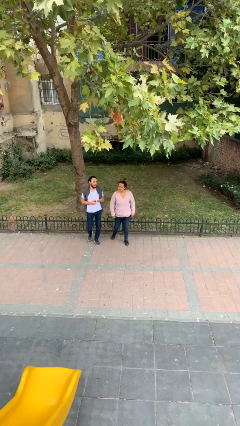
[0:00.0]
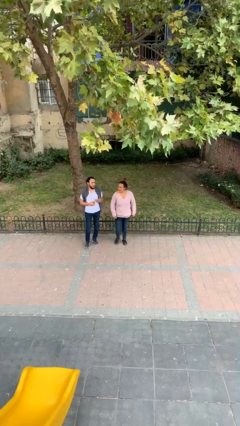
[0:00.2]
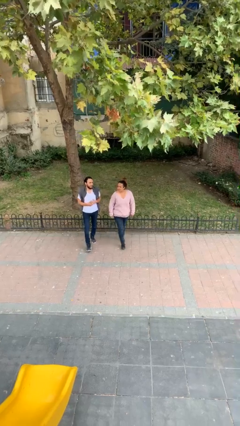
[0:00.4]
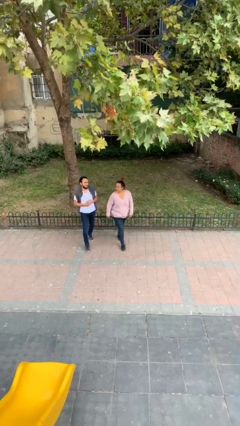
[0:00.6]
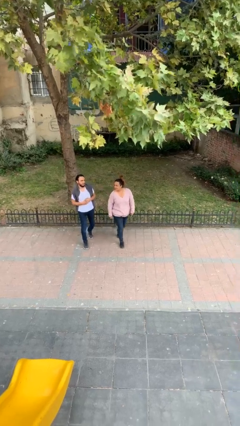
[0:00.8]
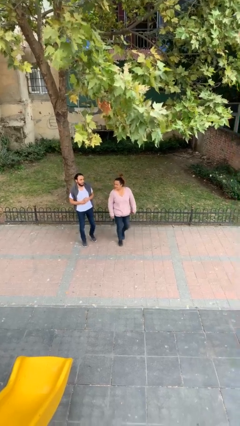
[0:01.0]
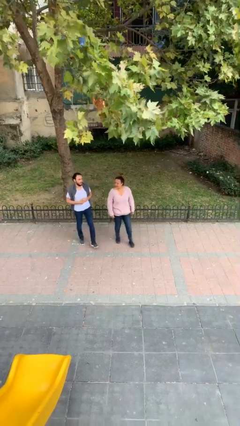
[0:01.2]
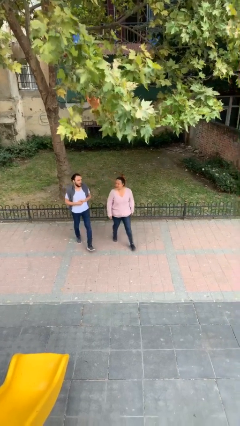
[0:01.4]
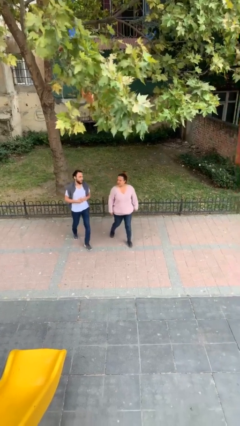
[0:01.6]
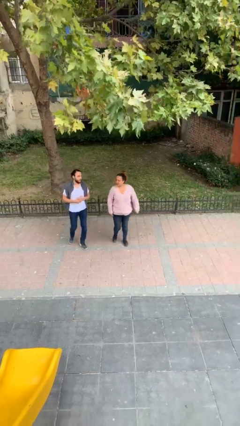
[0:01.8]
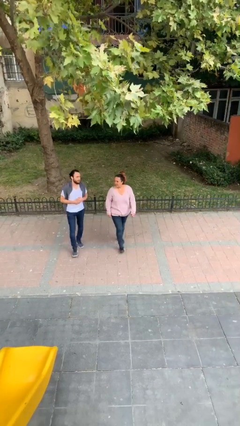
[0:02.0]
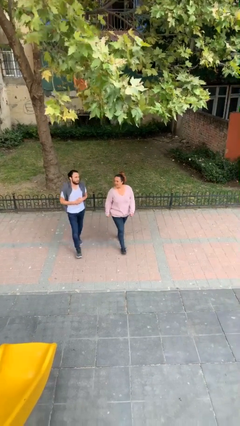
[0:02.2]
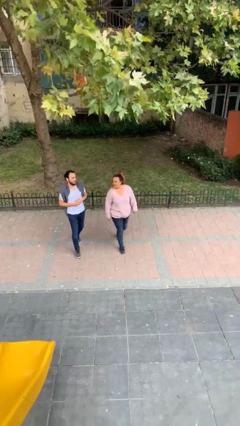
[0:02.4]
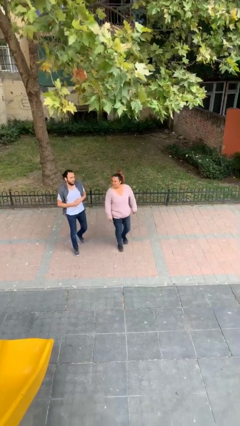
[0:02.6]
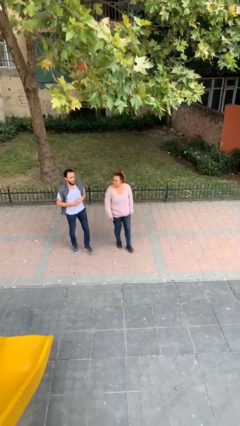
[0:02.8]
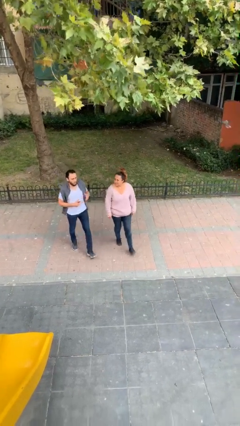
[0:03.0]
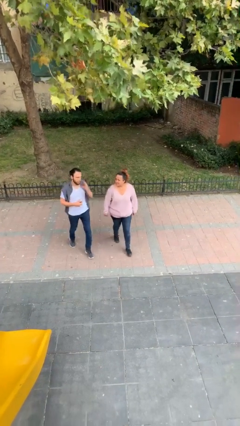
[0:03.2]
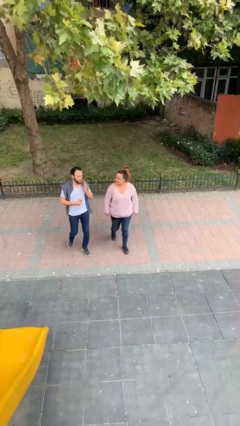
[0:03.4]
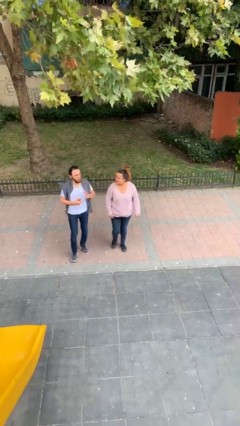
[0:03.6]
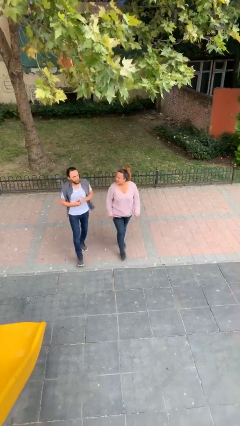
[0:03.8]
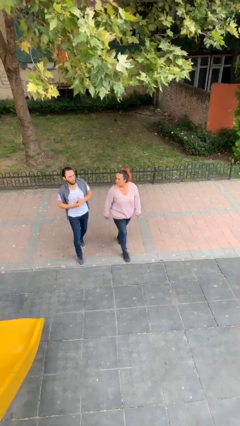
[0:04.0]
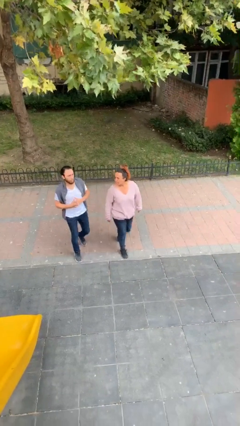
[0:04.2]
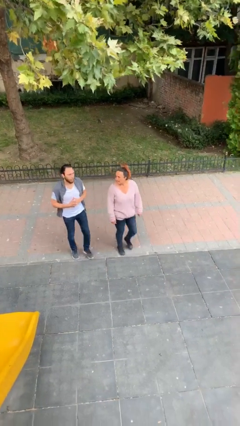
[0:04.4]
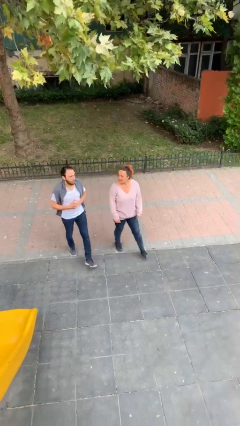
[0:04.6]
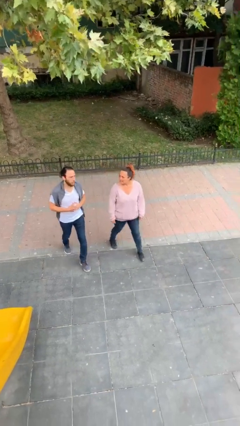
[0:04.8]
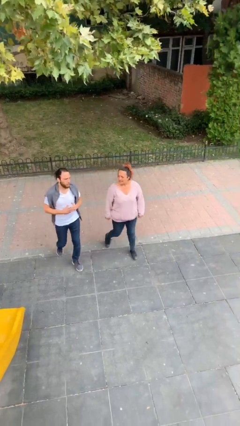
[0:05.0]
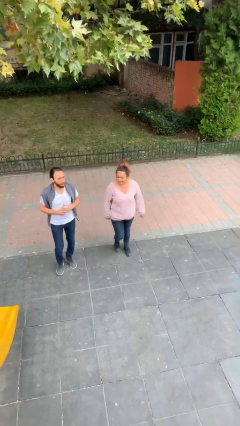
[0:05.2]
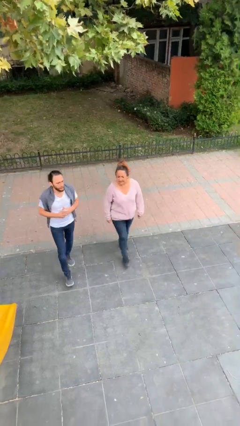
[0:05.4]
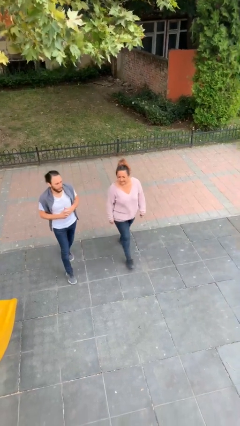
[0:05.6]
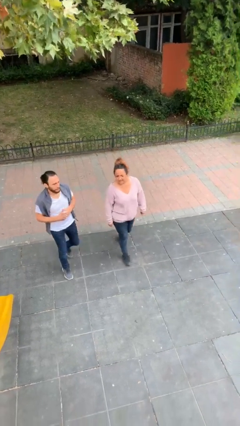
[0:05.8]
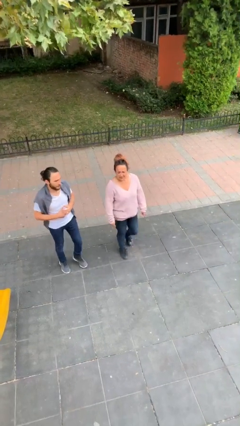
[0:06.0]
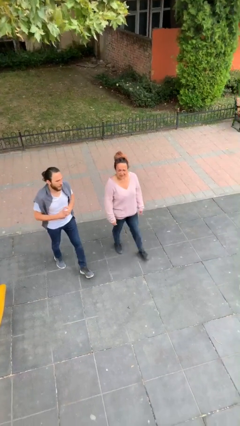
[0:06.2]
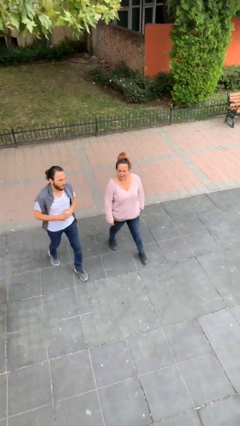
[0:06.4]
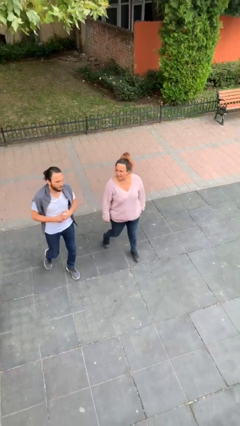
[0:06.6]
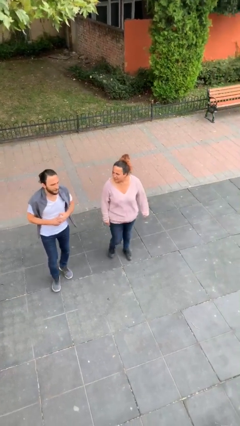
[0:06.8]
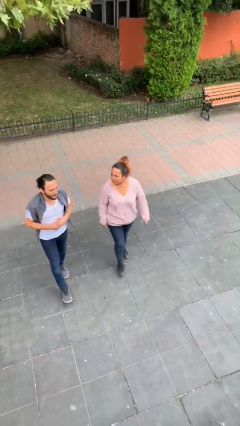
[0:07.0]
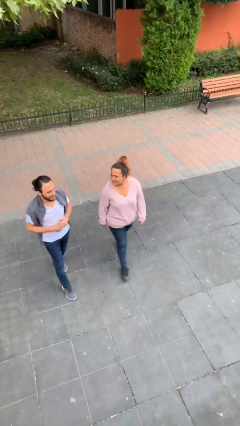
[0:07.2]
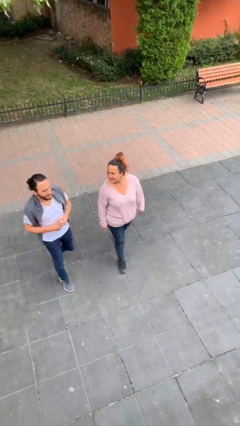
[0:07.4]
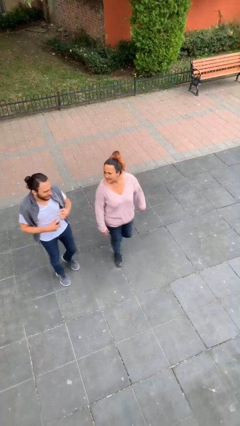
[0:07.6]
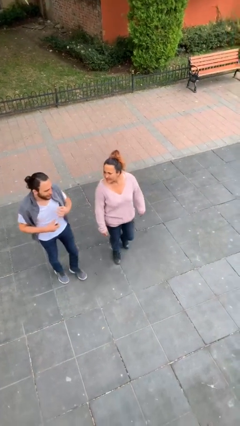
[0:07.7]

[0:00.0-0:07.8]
person talks to person

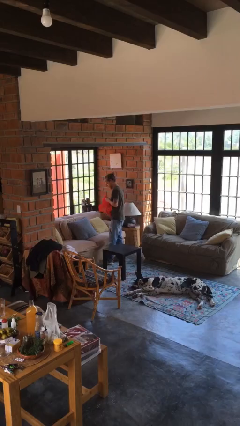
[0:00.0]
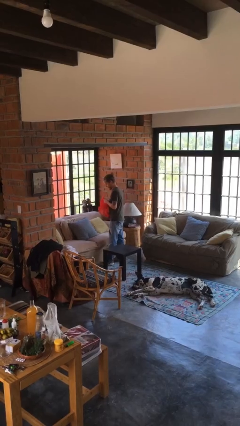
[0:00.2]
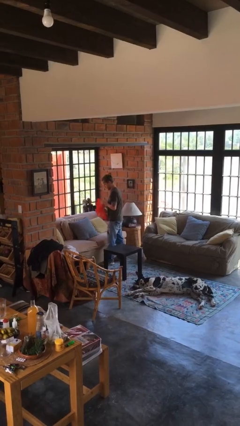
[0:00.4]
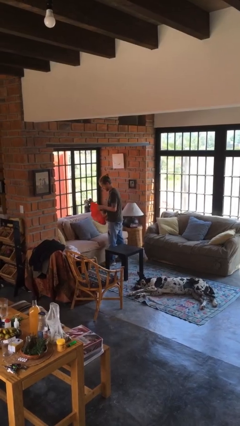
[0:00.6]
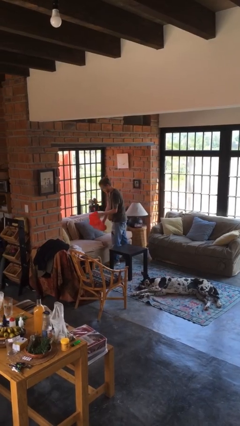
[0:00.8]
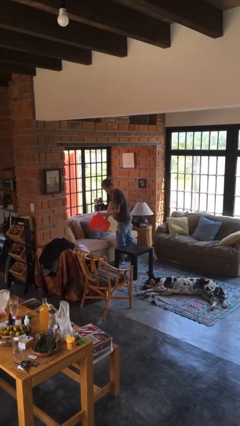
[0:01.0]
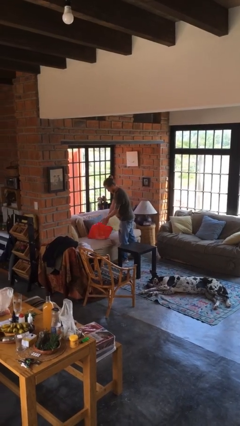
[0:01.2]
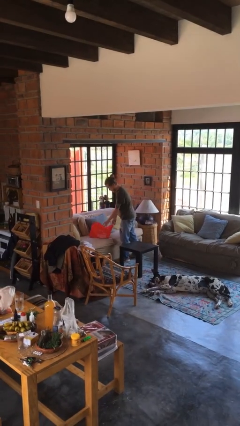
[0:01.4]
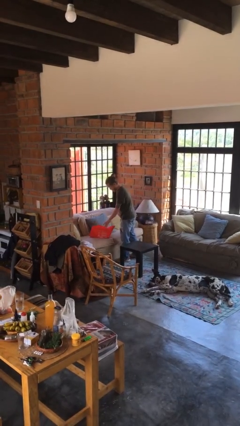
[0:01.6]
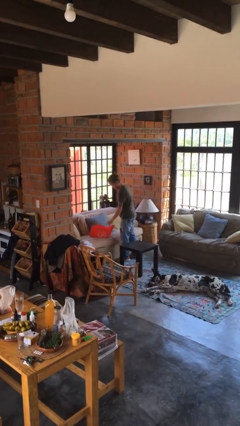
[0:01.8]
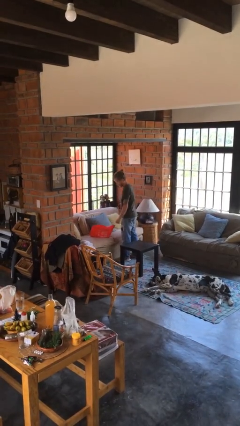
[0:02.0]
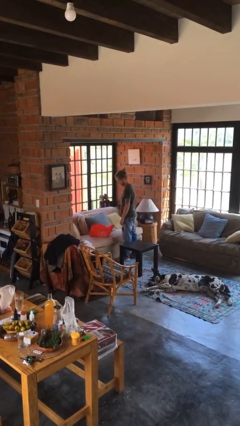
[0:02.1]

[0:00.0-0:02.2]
person puts down object on couch

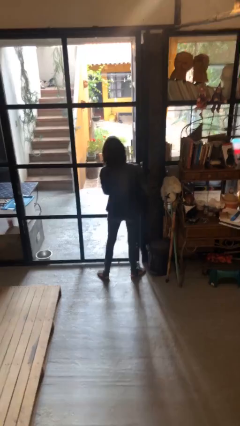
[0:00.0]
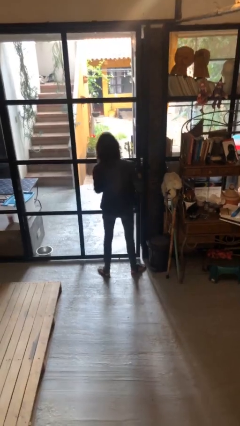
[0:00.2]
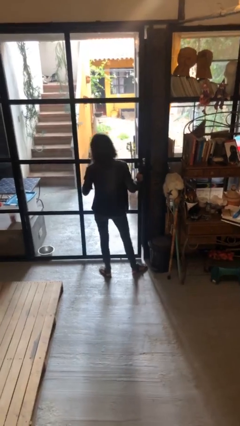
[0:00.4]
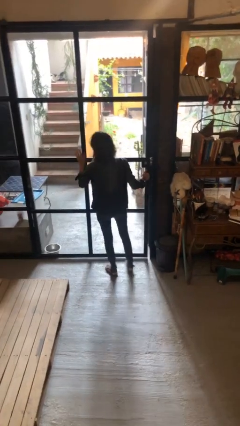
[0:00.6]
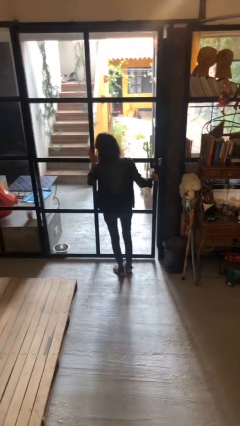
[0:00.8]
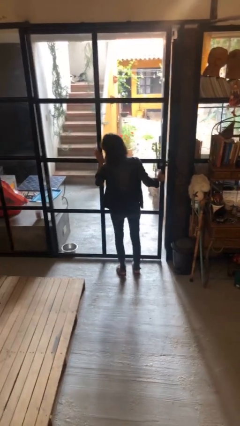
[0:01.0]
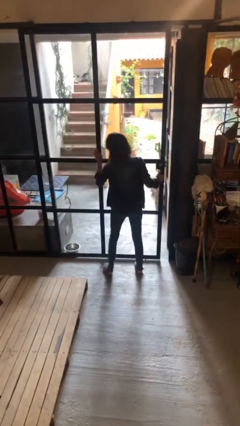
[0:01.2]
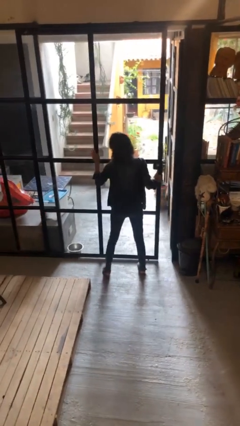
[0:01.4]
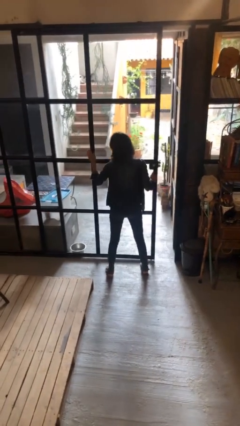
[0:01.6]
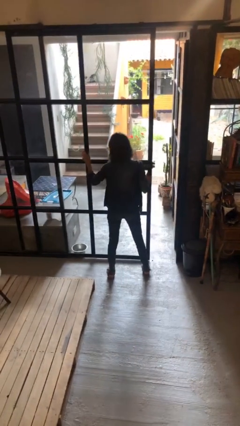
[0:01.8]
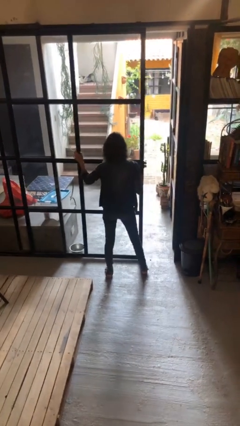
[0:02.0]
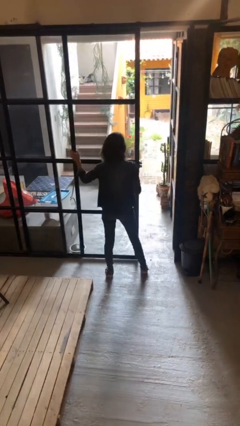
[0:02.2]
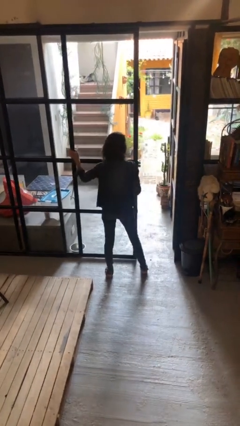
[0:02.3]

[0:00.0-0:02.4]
person opens sliding door

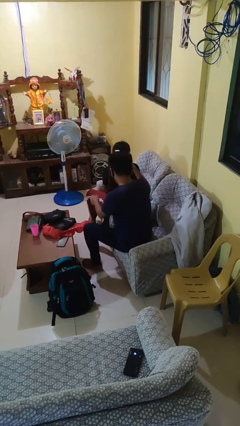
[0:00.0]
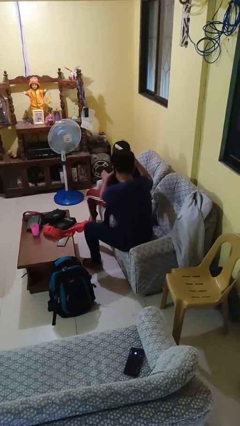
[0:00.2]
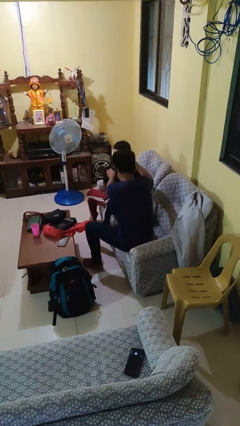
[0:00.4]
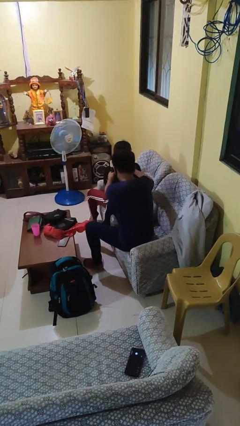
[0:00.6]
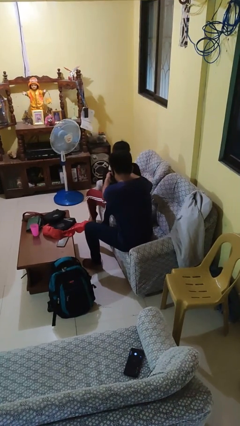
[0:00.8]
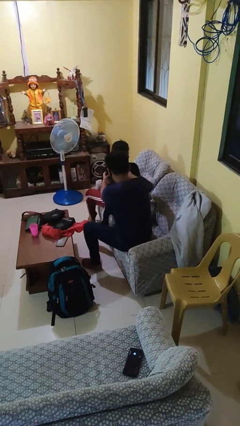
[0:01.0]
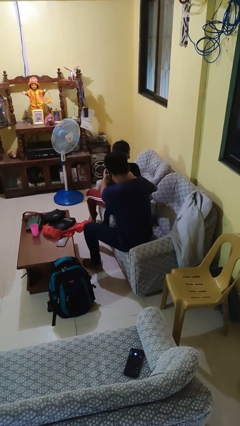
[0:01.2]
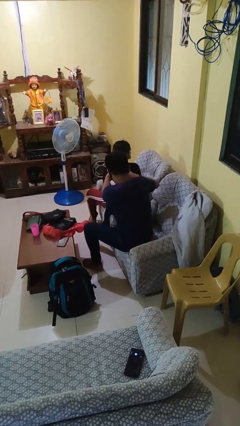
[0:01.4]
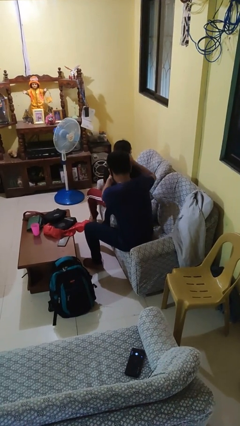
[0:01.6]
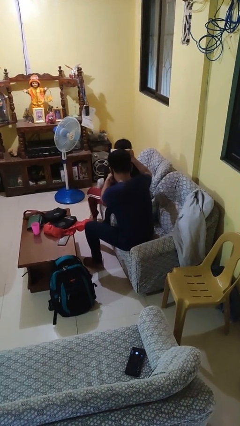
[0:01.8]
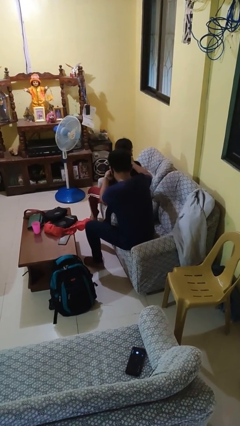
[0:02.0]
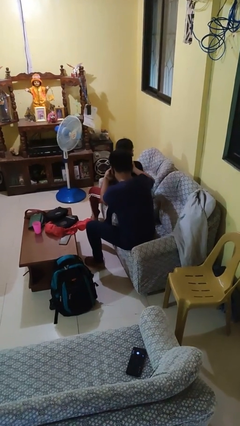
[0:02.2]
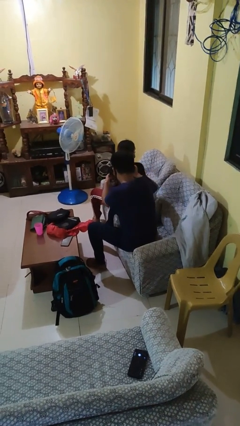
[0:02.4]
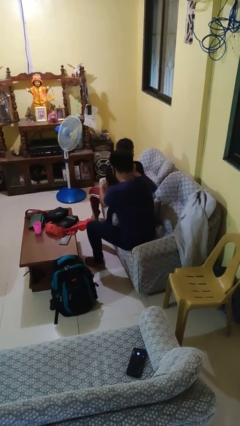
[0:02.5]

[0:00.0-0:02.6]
person brushes hair of person

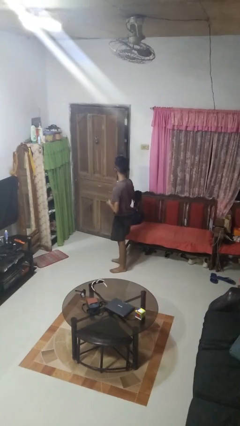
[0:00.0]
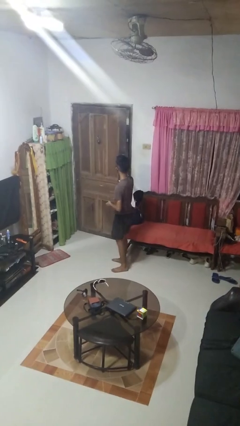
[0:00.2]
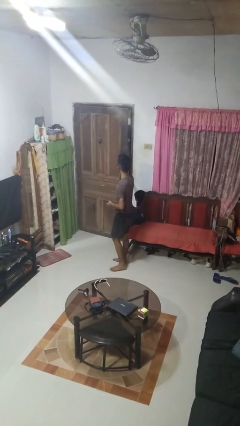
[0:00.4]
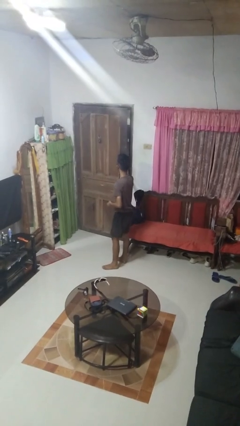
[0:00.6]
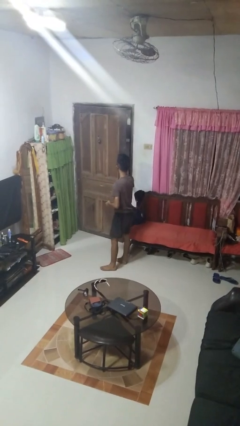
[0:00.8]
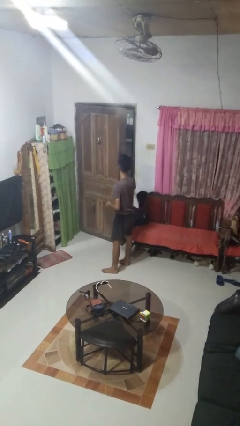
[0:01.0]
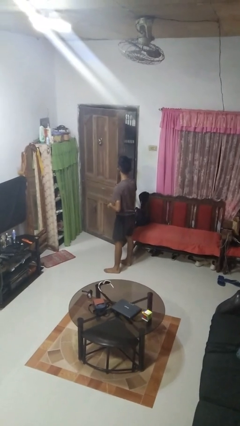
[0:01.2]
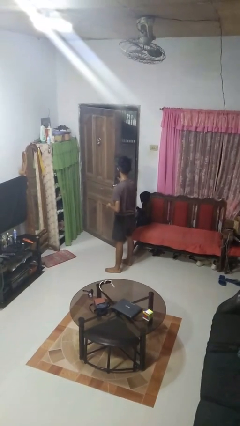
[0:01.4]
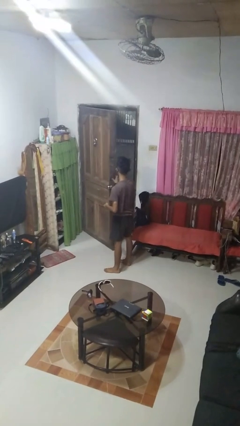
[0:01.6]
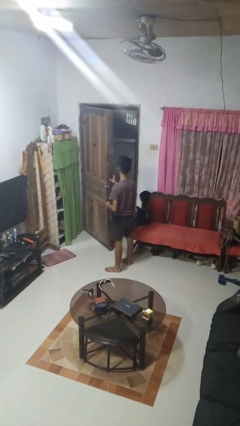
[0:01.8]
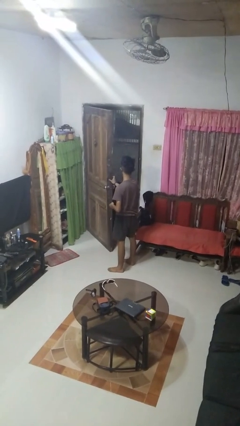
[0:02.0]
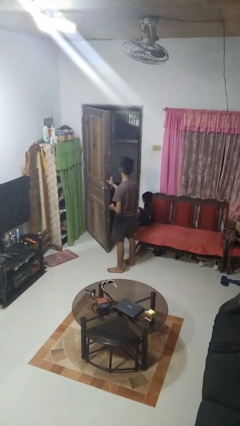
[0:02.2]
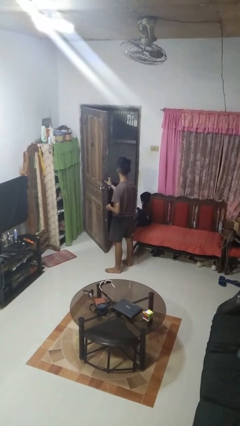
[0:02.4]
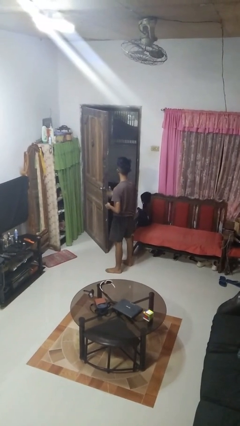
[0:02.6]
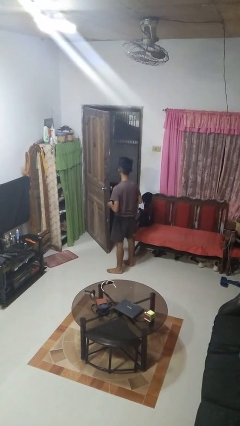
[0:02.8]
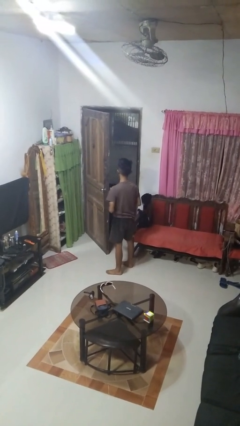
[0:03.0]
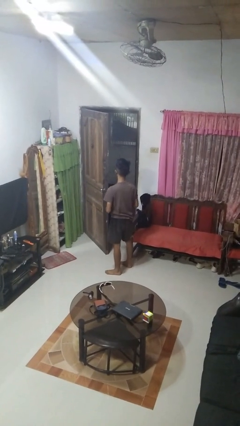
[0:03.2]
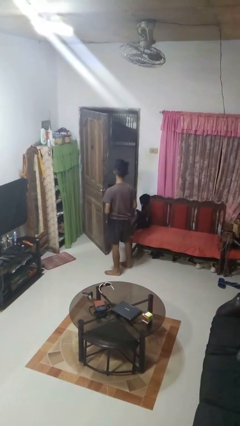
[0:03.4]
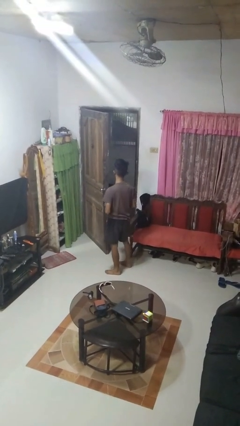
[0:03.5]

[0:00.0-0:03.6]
person opens facility door
